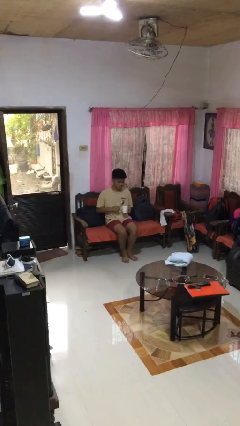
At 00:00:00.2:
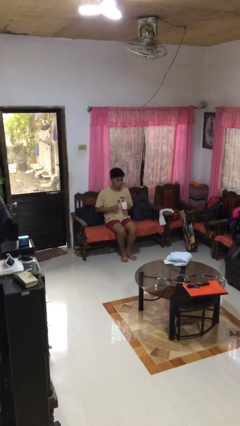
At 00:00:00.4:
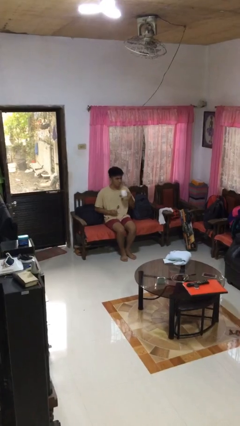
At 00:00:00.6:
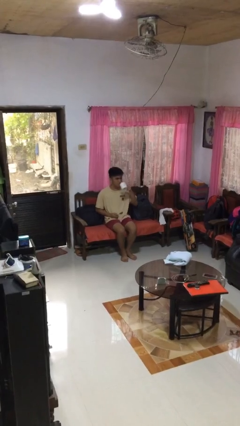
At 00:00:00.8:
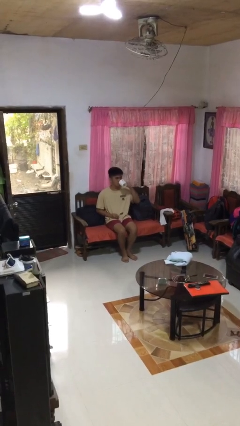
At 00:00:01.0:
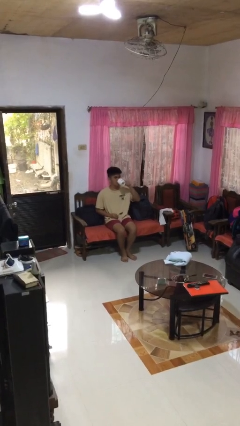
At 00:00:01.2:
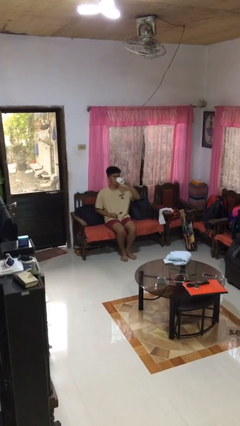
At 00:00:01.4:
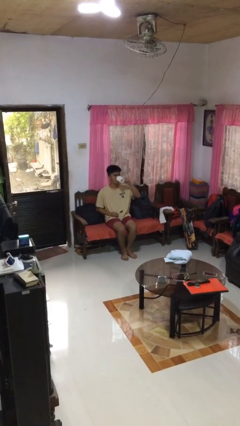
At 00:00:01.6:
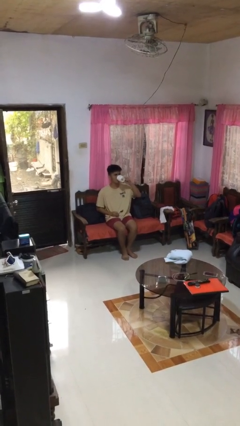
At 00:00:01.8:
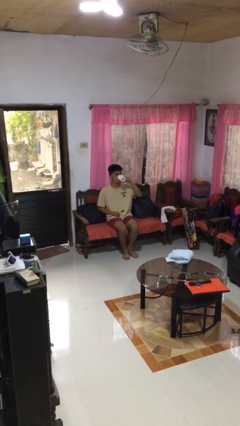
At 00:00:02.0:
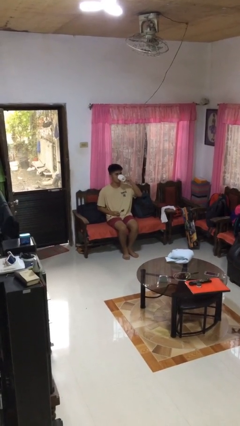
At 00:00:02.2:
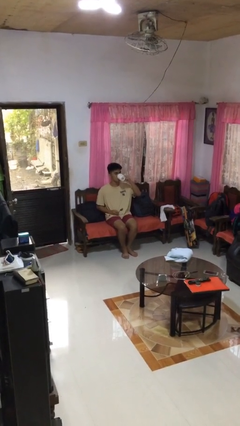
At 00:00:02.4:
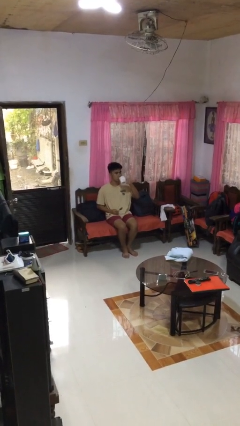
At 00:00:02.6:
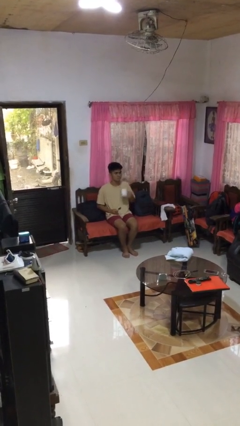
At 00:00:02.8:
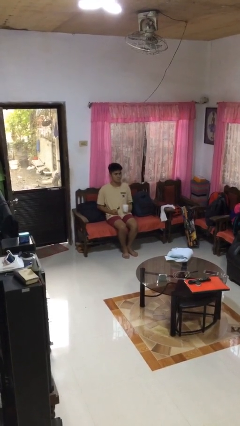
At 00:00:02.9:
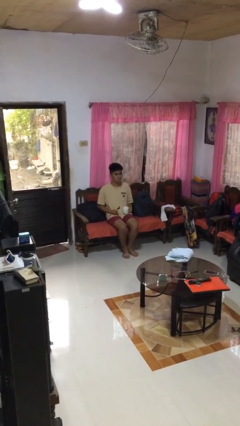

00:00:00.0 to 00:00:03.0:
person drinks from mug

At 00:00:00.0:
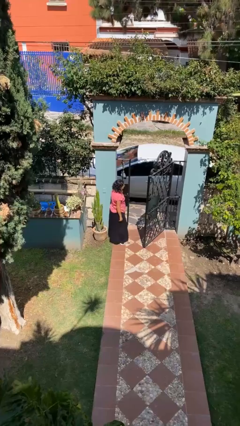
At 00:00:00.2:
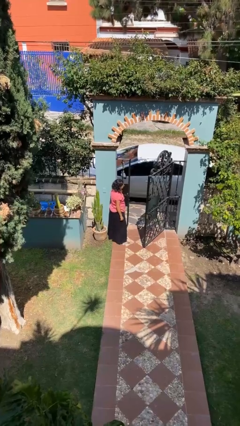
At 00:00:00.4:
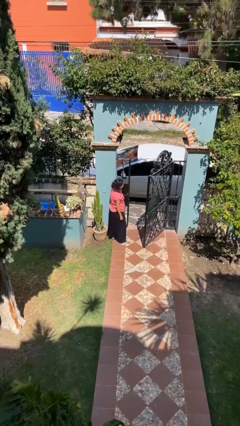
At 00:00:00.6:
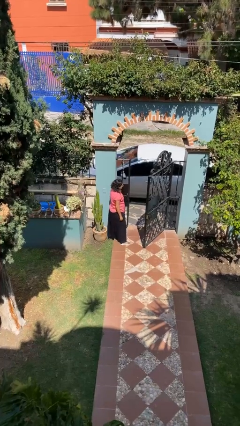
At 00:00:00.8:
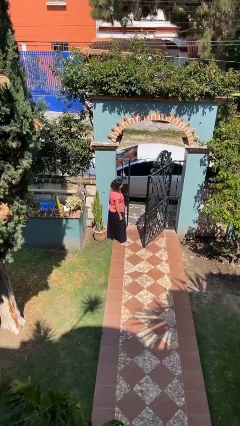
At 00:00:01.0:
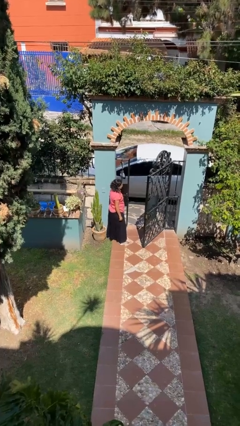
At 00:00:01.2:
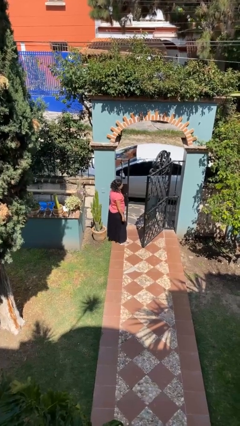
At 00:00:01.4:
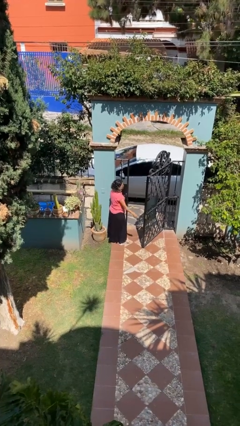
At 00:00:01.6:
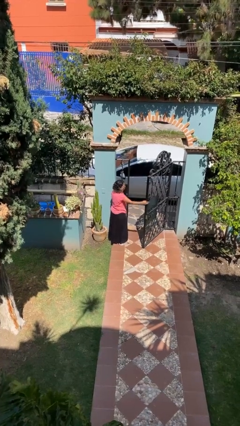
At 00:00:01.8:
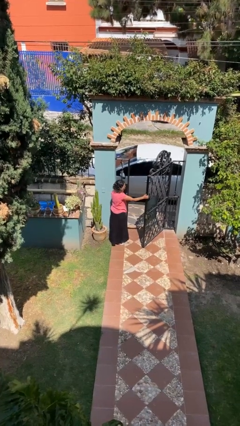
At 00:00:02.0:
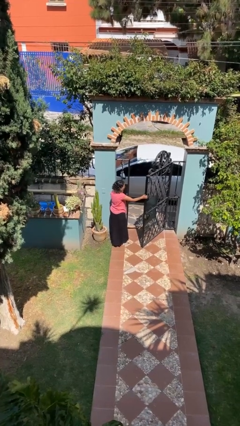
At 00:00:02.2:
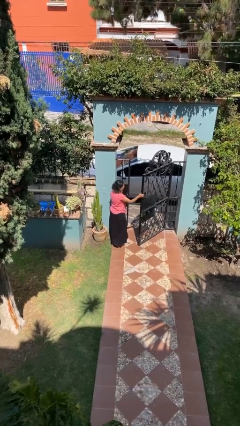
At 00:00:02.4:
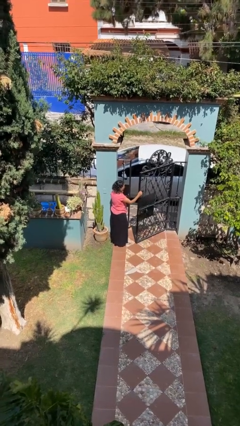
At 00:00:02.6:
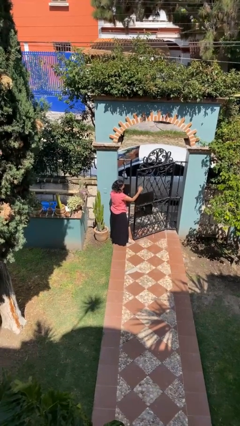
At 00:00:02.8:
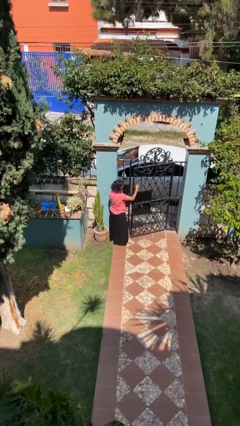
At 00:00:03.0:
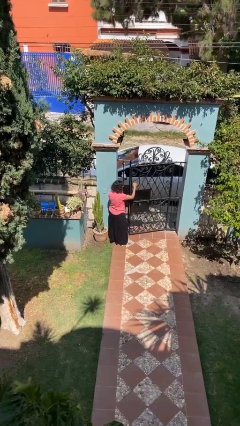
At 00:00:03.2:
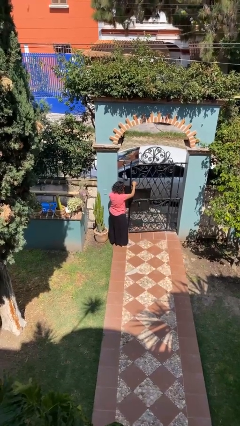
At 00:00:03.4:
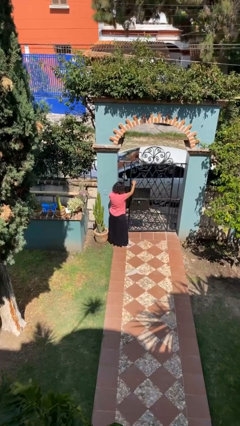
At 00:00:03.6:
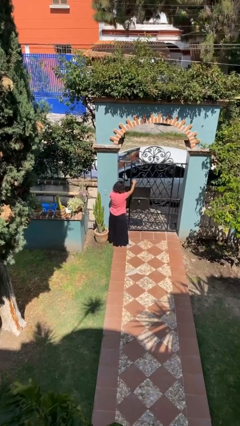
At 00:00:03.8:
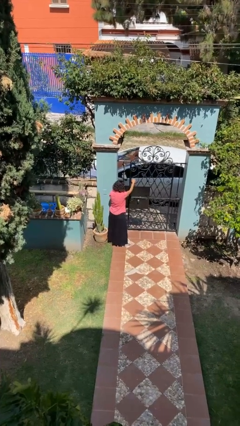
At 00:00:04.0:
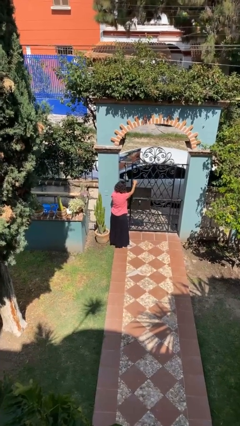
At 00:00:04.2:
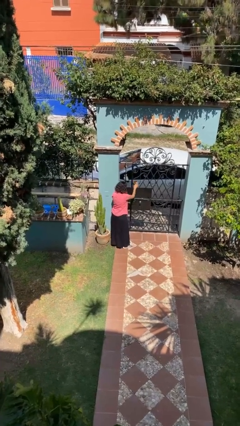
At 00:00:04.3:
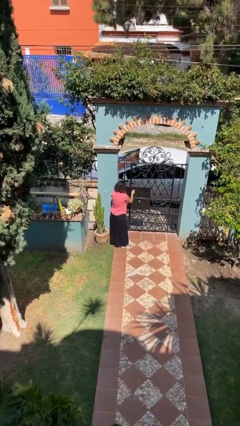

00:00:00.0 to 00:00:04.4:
person closes facility door

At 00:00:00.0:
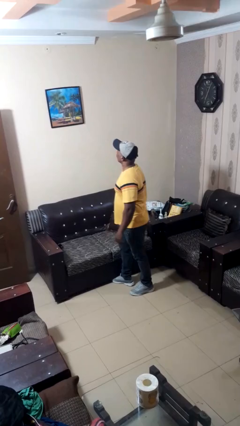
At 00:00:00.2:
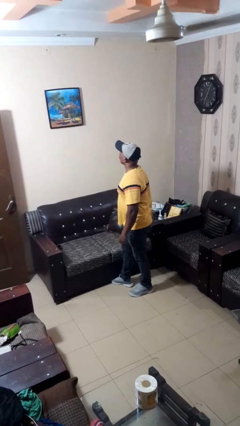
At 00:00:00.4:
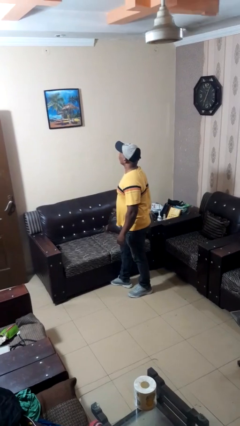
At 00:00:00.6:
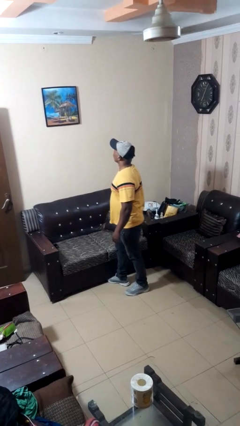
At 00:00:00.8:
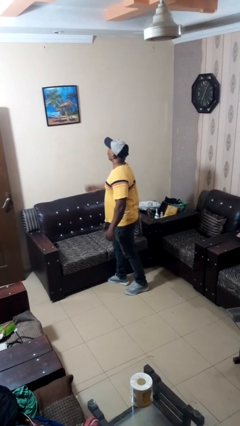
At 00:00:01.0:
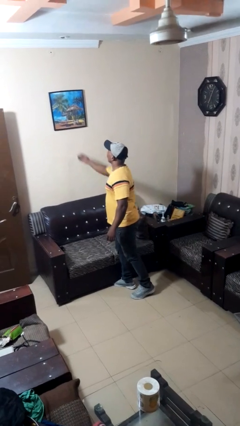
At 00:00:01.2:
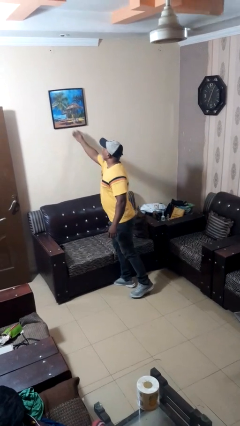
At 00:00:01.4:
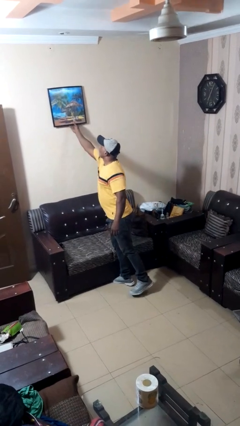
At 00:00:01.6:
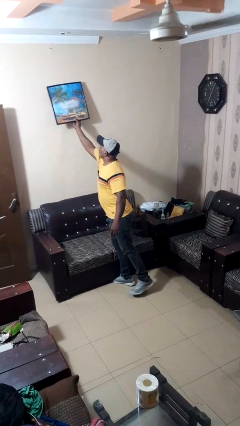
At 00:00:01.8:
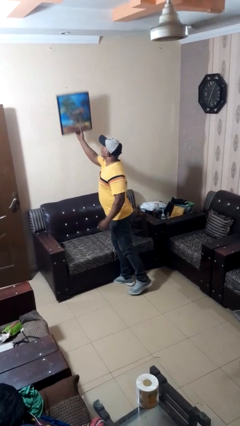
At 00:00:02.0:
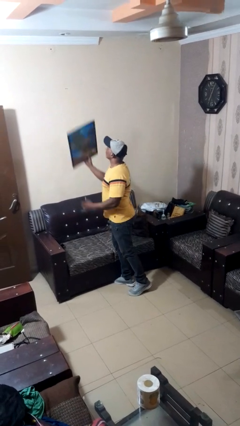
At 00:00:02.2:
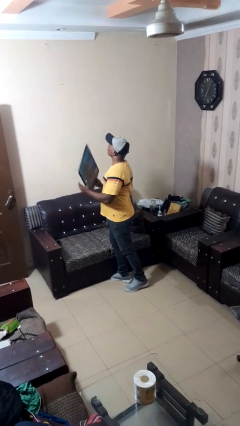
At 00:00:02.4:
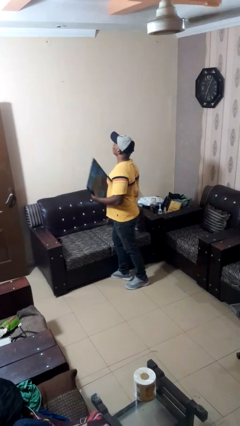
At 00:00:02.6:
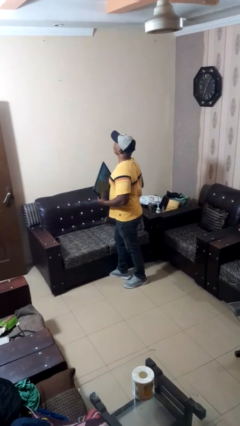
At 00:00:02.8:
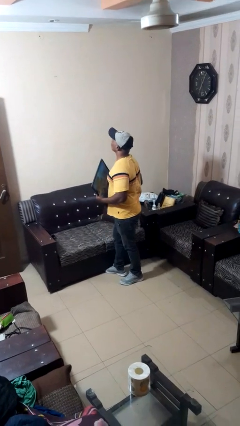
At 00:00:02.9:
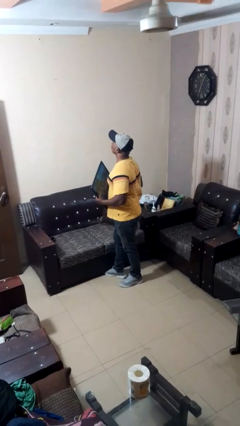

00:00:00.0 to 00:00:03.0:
person takes down picture frame

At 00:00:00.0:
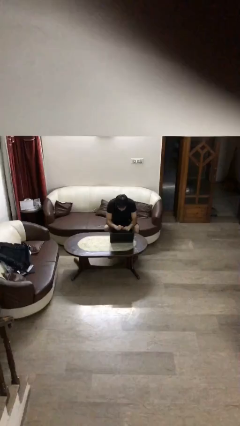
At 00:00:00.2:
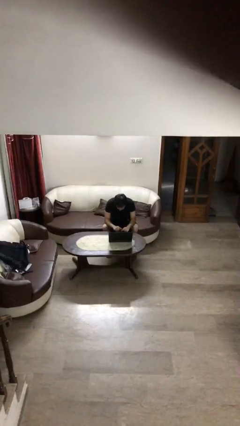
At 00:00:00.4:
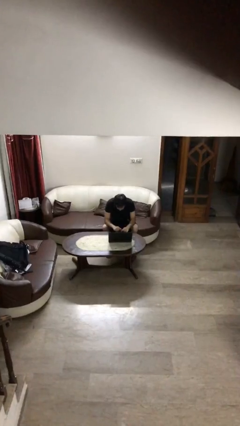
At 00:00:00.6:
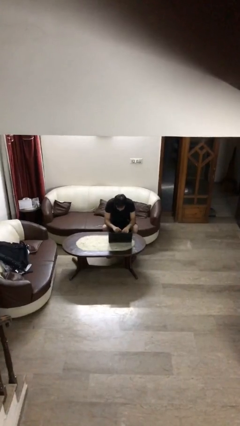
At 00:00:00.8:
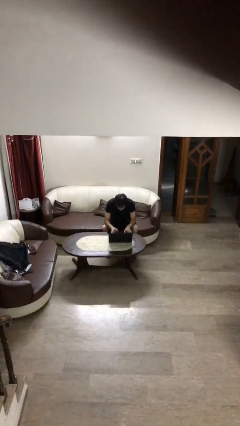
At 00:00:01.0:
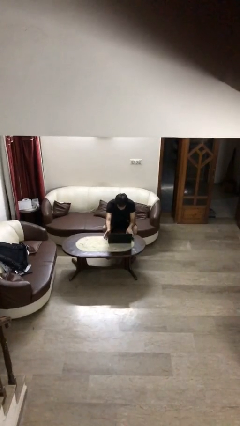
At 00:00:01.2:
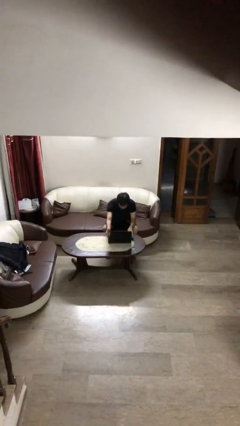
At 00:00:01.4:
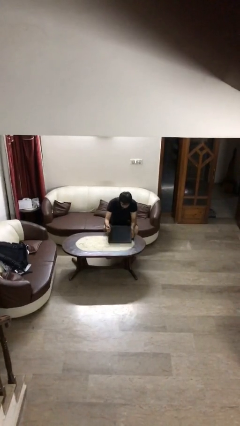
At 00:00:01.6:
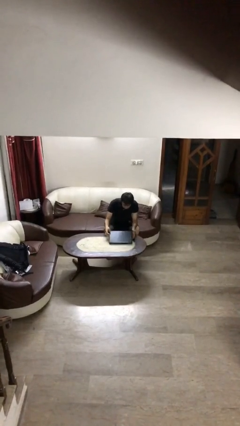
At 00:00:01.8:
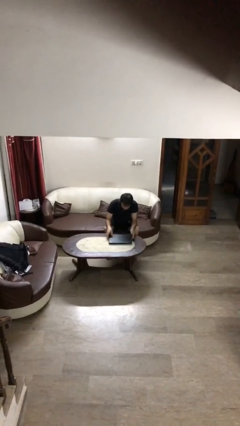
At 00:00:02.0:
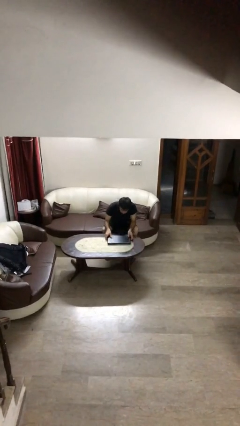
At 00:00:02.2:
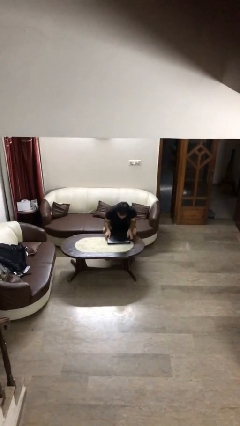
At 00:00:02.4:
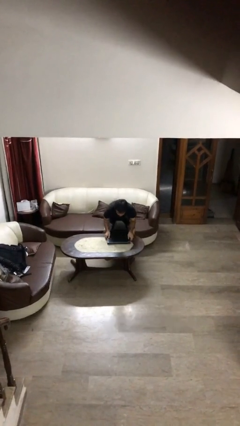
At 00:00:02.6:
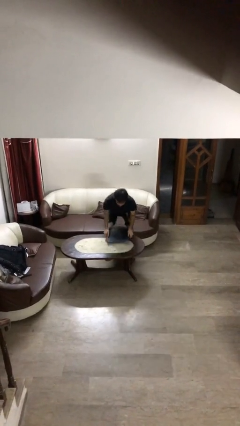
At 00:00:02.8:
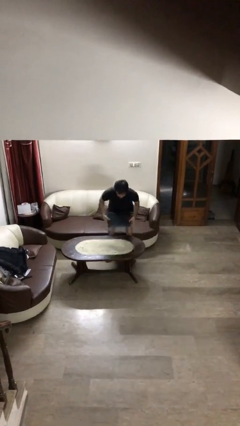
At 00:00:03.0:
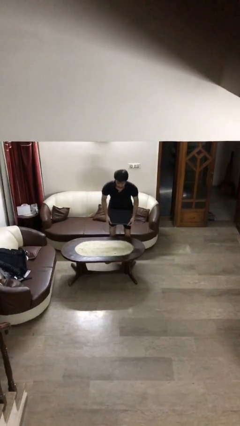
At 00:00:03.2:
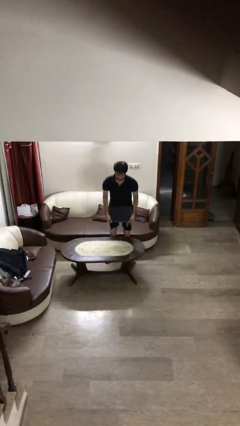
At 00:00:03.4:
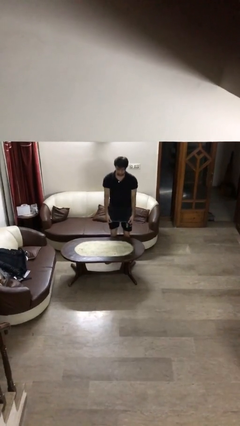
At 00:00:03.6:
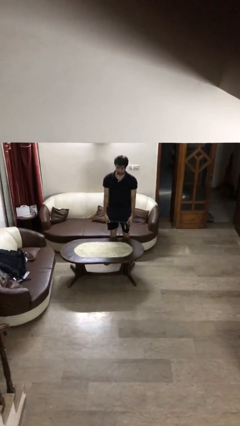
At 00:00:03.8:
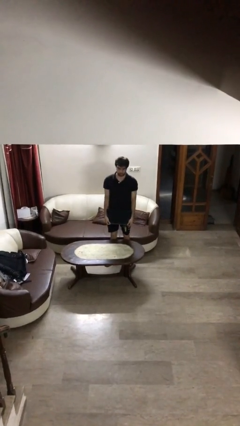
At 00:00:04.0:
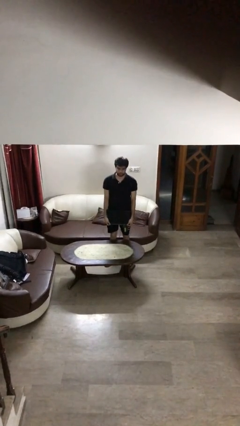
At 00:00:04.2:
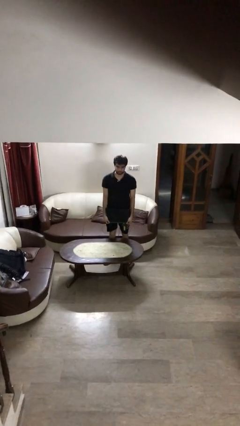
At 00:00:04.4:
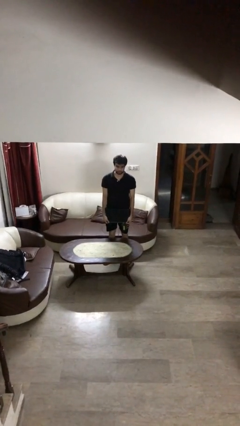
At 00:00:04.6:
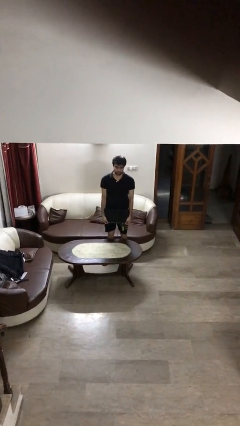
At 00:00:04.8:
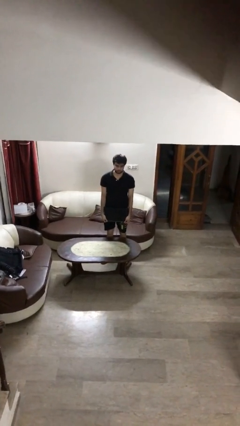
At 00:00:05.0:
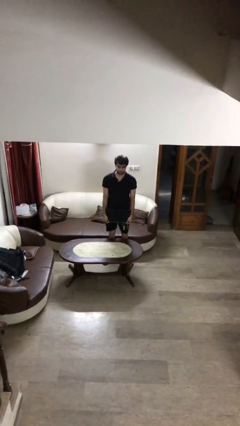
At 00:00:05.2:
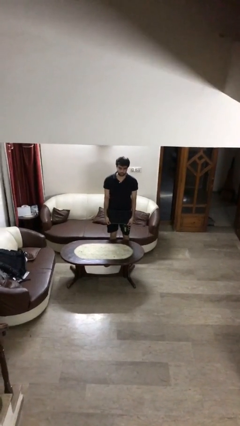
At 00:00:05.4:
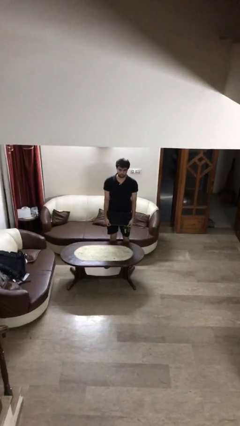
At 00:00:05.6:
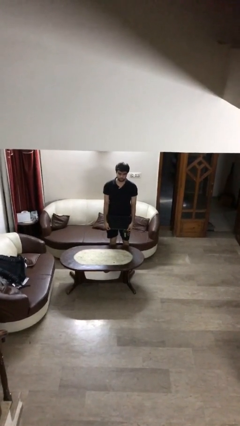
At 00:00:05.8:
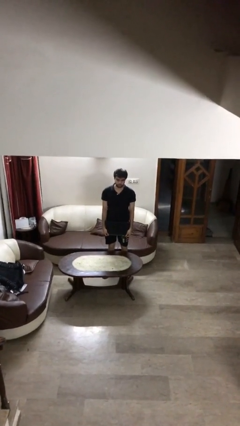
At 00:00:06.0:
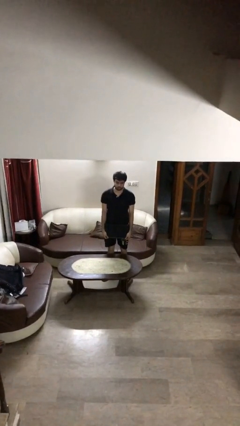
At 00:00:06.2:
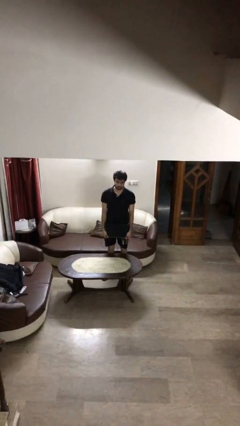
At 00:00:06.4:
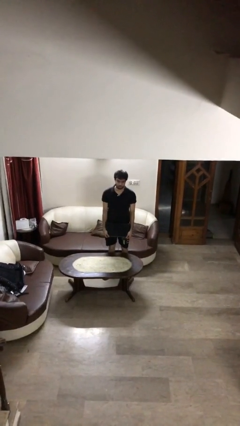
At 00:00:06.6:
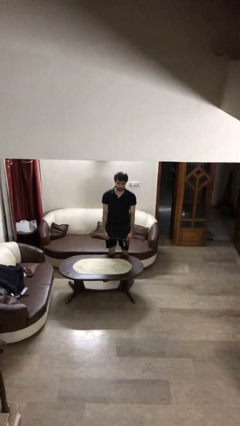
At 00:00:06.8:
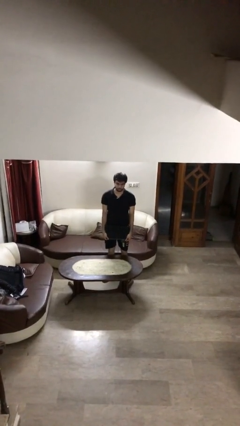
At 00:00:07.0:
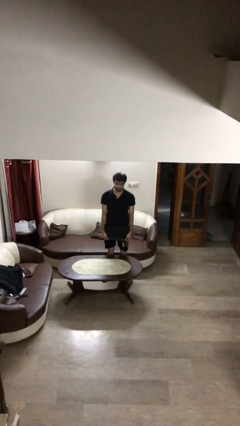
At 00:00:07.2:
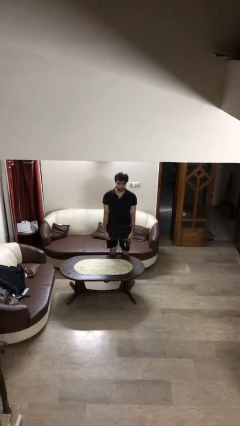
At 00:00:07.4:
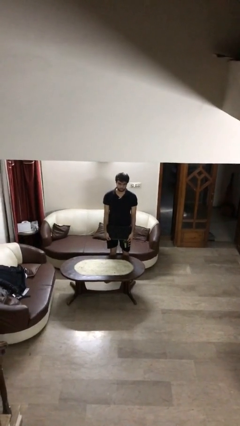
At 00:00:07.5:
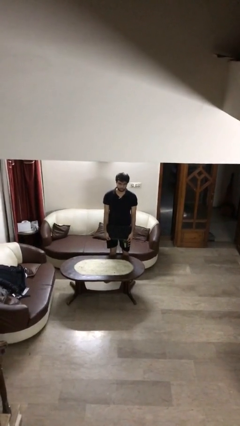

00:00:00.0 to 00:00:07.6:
person stands up
